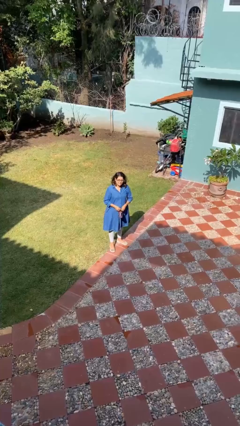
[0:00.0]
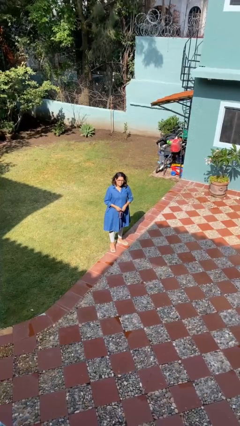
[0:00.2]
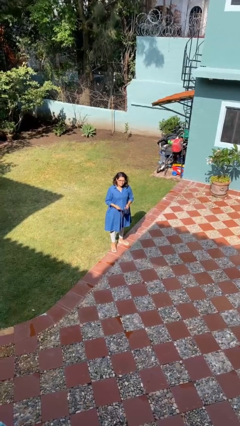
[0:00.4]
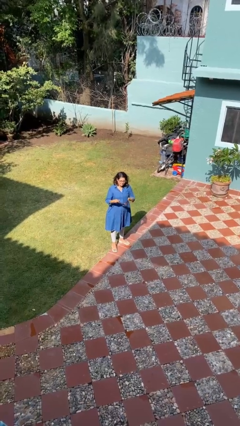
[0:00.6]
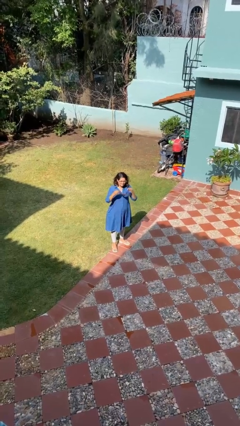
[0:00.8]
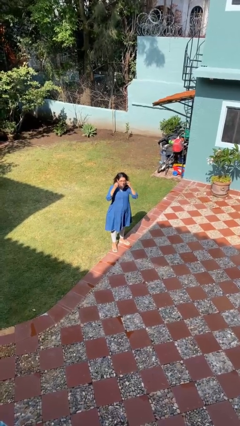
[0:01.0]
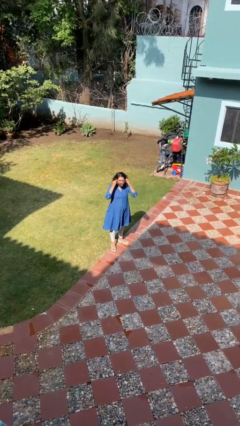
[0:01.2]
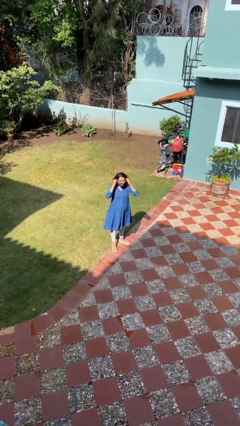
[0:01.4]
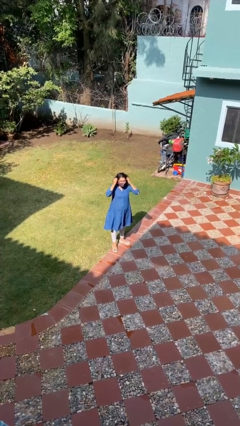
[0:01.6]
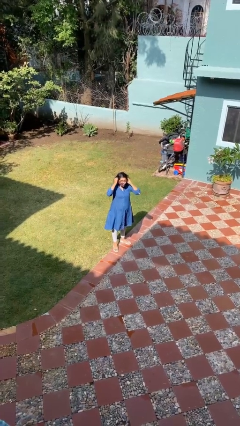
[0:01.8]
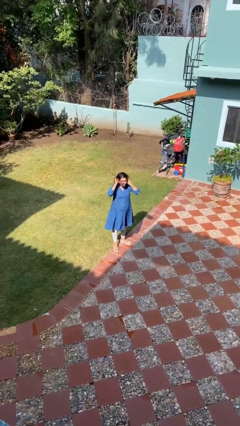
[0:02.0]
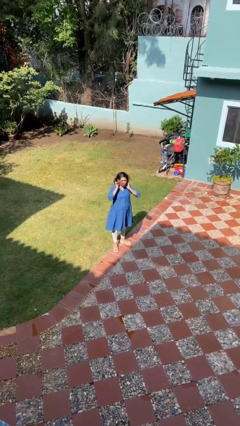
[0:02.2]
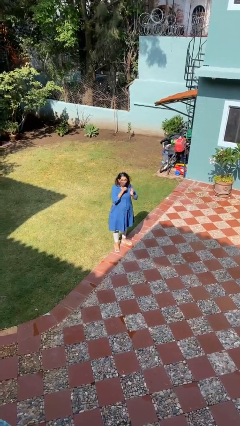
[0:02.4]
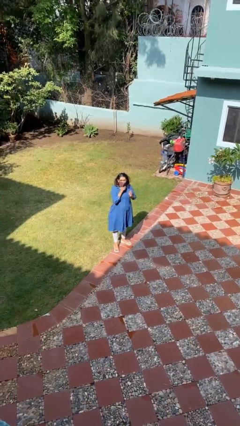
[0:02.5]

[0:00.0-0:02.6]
person puts on facemask

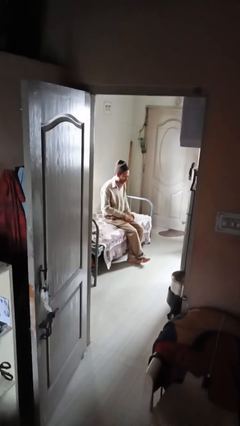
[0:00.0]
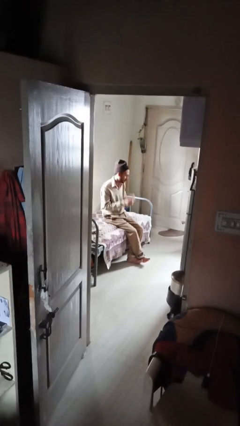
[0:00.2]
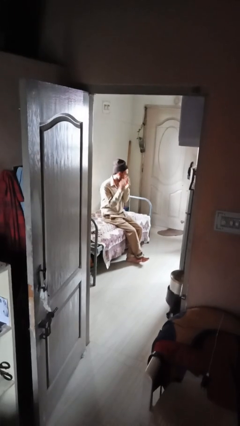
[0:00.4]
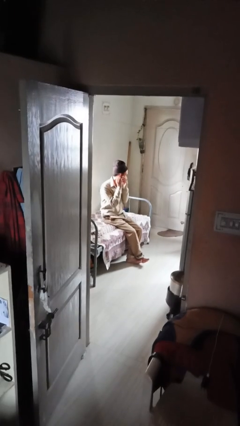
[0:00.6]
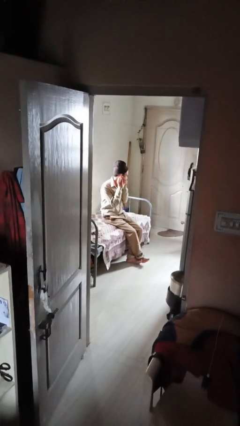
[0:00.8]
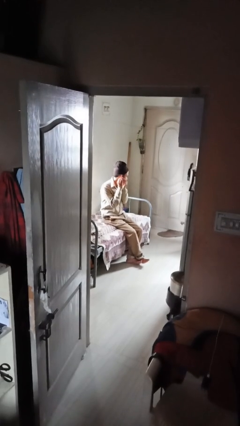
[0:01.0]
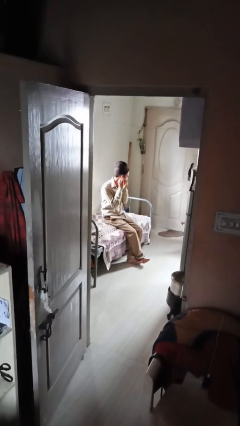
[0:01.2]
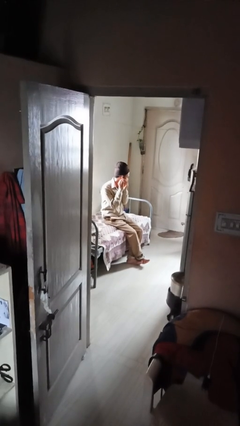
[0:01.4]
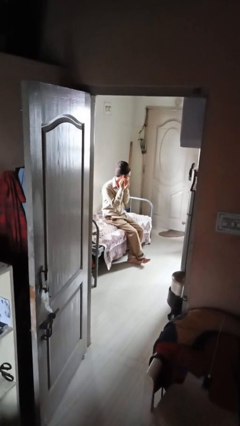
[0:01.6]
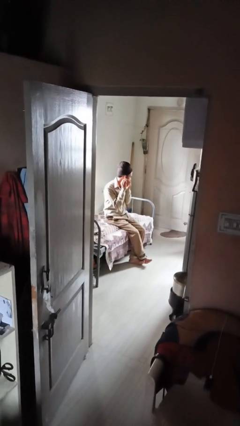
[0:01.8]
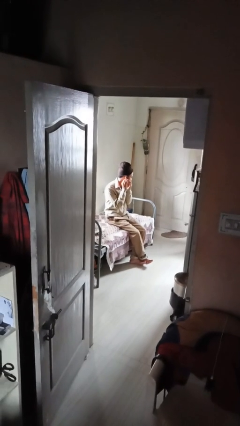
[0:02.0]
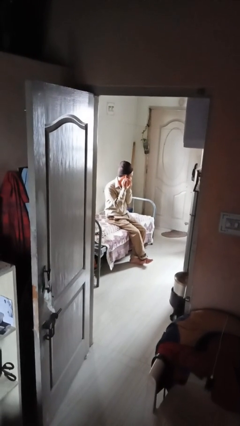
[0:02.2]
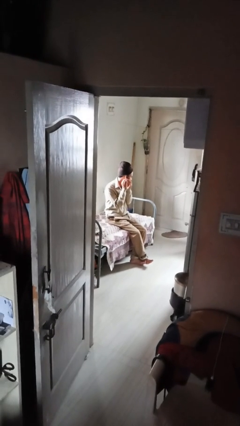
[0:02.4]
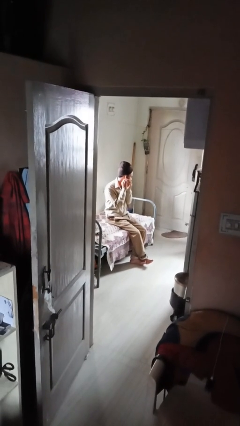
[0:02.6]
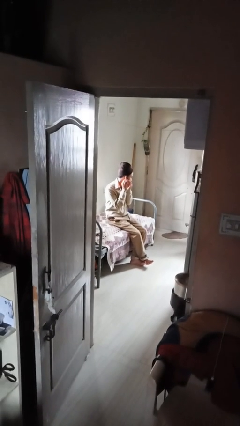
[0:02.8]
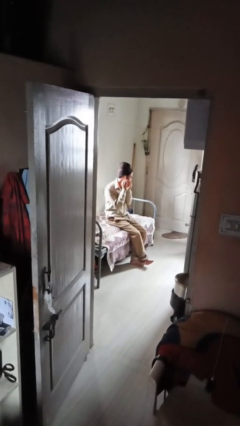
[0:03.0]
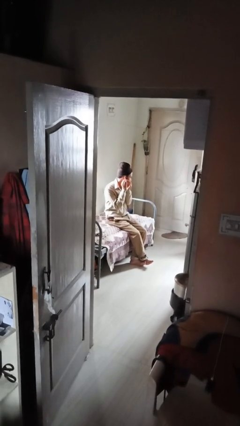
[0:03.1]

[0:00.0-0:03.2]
person puts on earrings

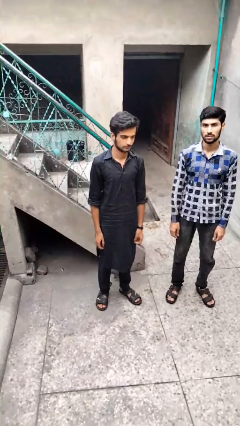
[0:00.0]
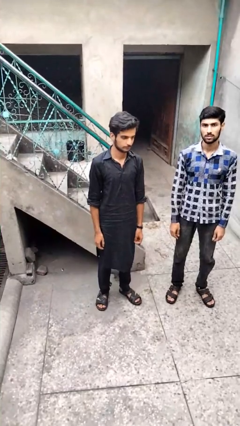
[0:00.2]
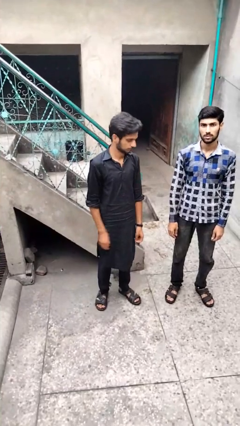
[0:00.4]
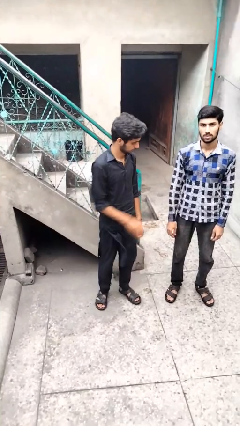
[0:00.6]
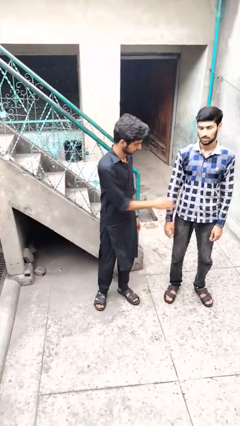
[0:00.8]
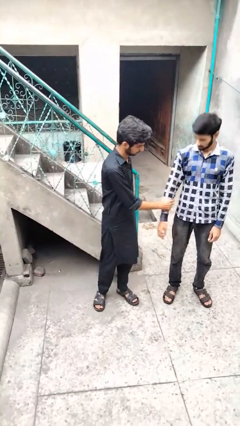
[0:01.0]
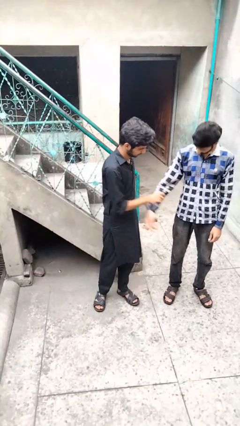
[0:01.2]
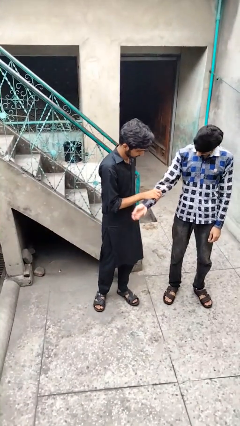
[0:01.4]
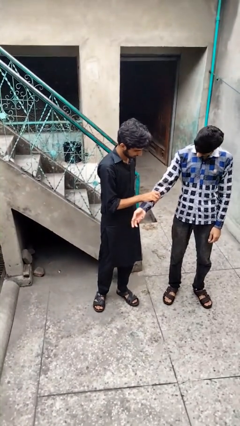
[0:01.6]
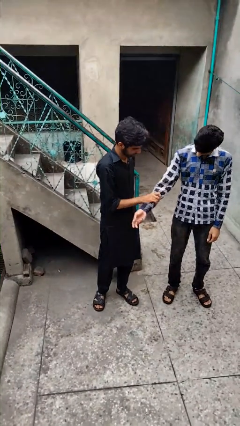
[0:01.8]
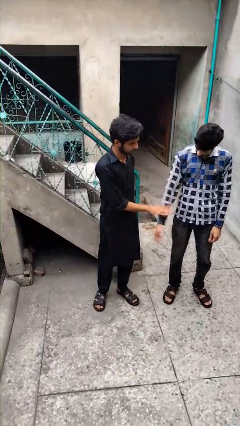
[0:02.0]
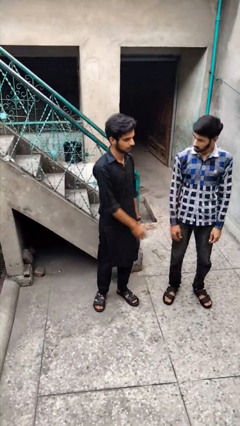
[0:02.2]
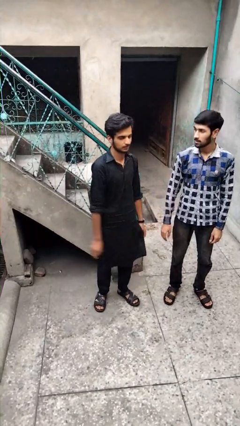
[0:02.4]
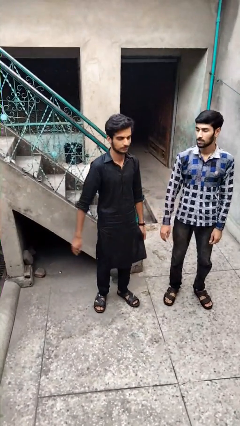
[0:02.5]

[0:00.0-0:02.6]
person grabs person by forearm

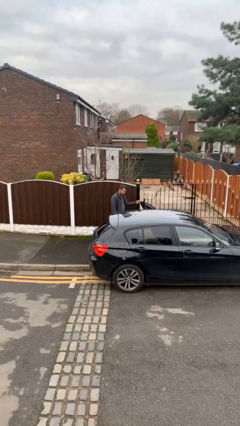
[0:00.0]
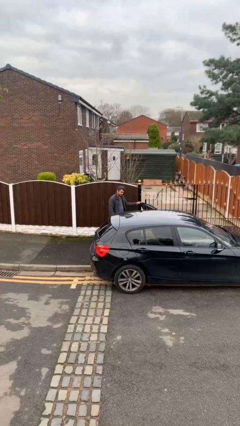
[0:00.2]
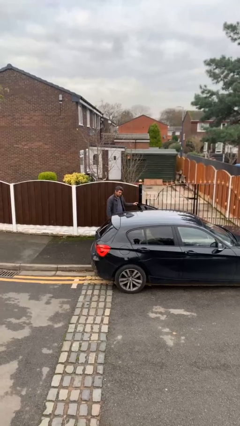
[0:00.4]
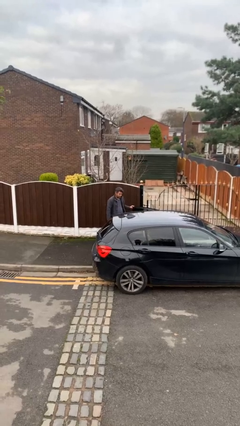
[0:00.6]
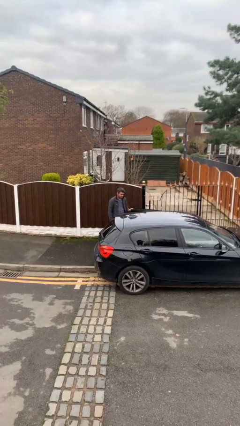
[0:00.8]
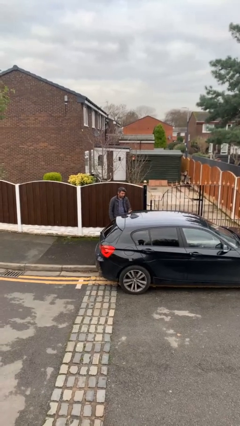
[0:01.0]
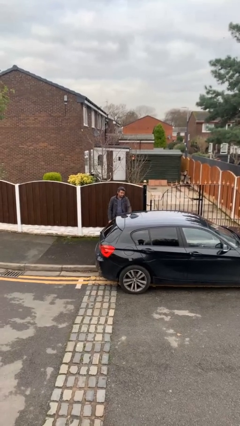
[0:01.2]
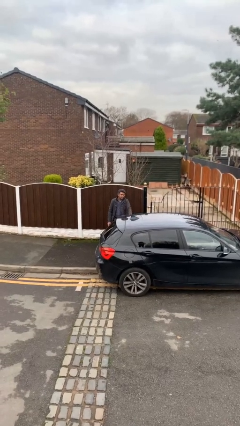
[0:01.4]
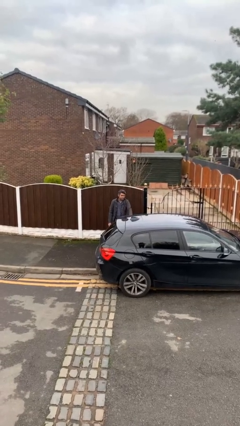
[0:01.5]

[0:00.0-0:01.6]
person closes car door

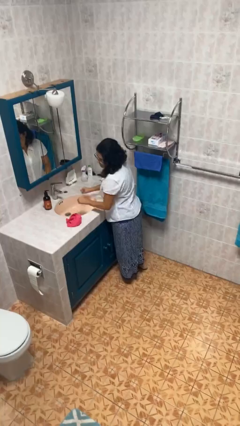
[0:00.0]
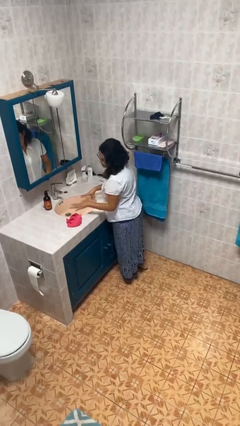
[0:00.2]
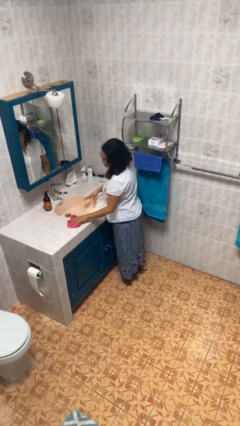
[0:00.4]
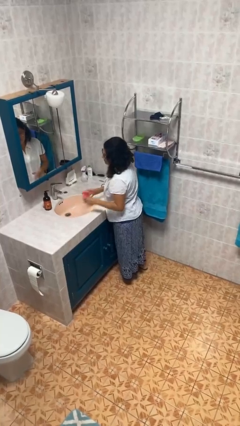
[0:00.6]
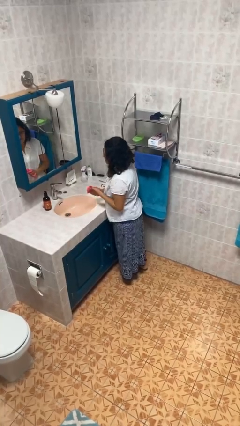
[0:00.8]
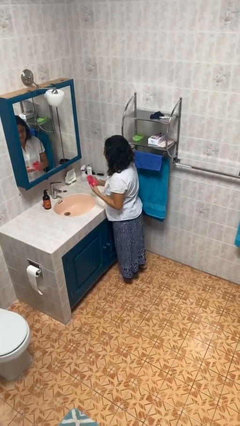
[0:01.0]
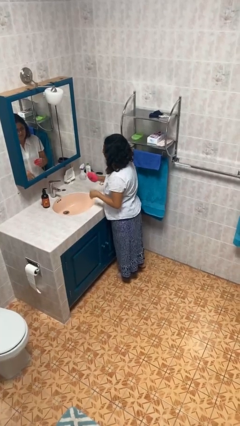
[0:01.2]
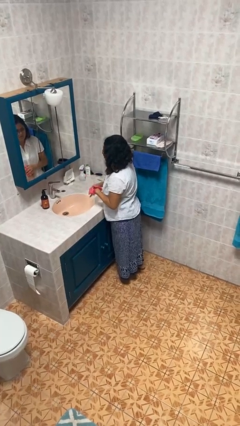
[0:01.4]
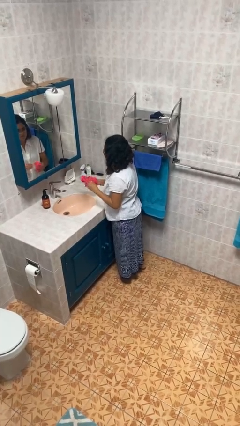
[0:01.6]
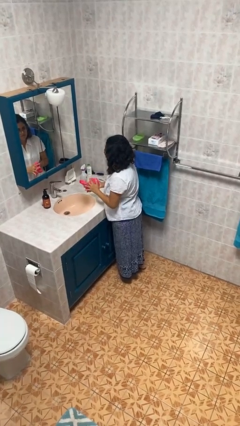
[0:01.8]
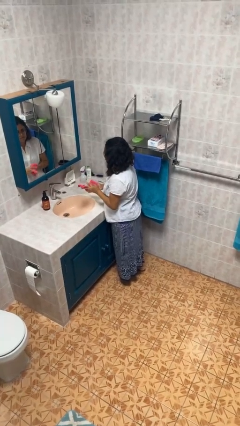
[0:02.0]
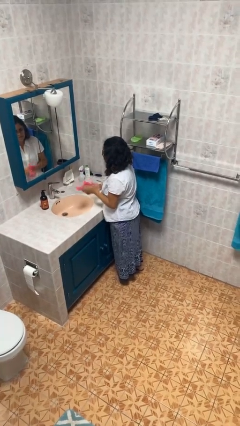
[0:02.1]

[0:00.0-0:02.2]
person dries hands with towel

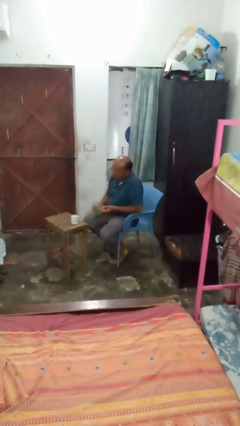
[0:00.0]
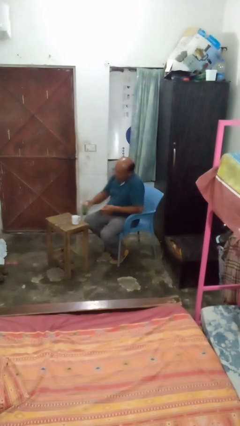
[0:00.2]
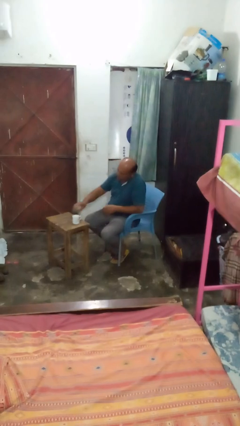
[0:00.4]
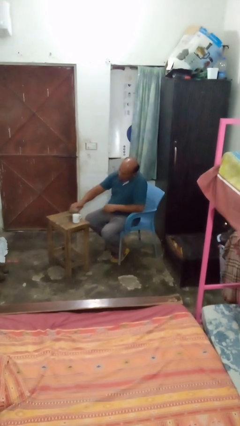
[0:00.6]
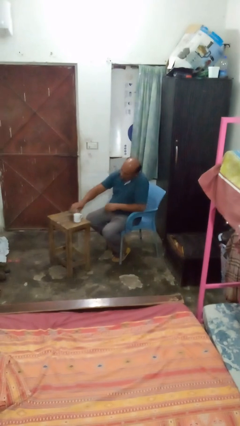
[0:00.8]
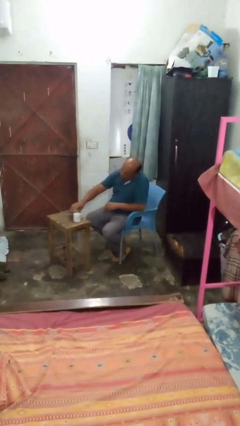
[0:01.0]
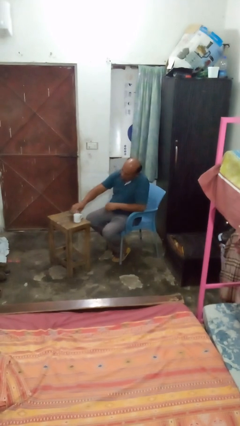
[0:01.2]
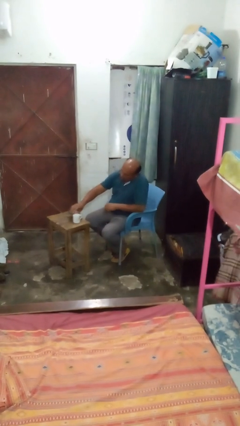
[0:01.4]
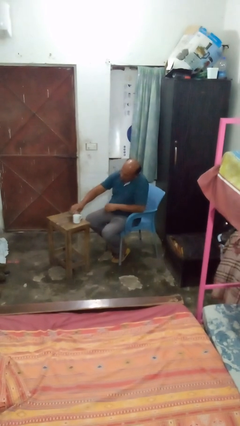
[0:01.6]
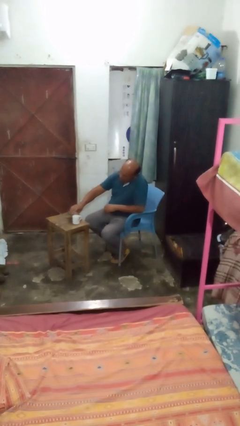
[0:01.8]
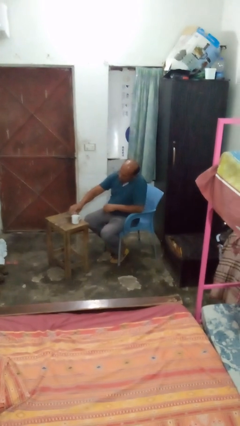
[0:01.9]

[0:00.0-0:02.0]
person pours liquid into cup

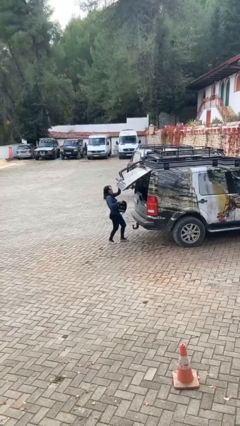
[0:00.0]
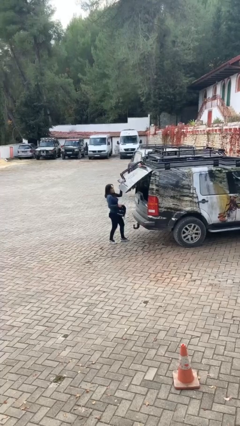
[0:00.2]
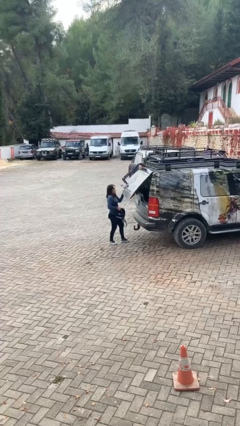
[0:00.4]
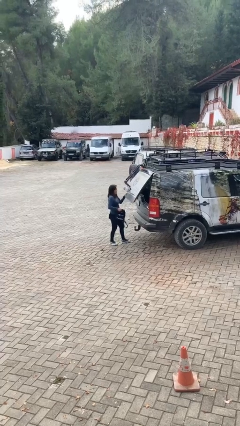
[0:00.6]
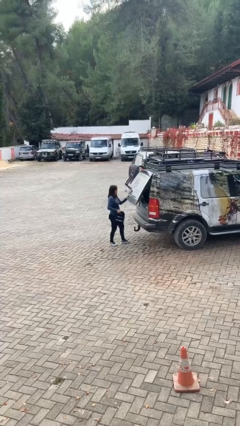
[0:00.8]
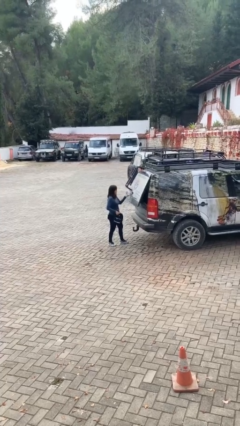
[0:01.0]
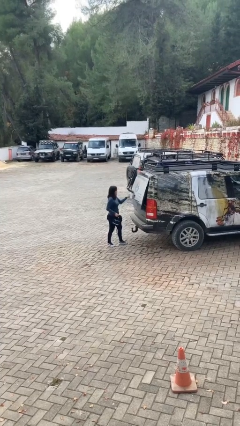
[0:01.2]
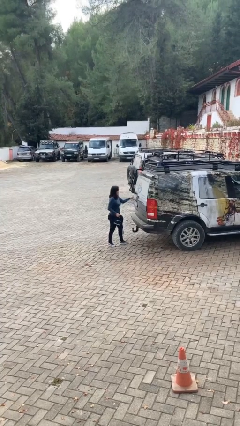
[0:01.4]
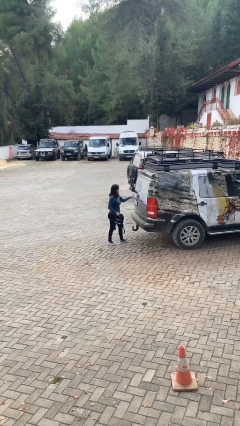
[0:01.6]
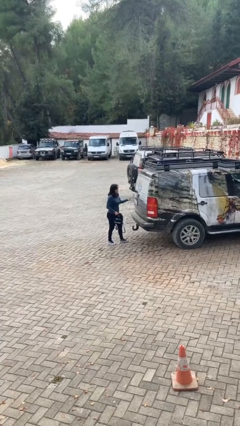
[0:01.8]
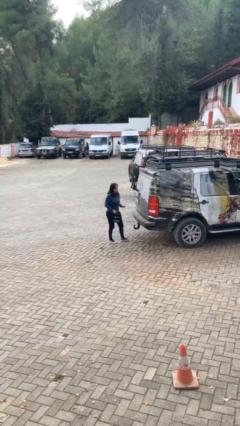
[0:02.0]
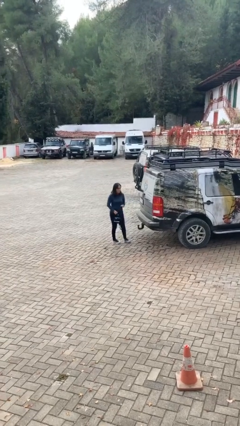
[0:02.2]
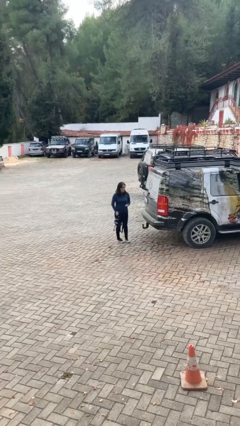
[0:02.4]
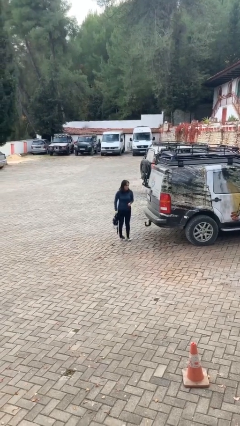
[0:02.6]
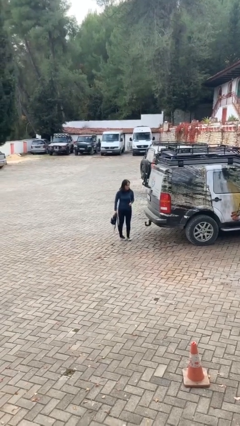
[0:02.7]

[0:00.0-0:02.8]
person closes car trunk
